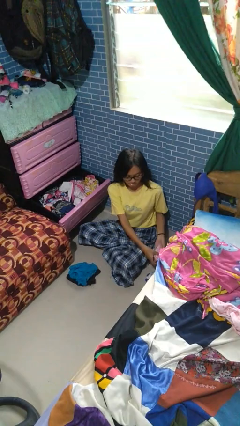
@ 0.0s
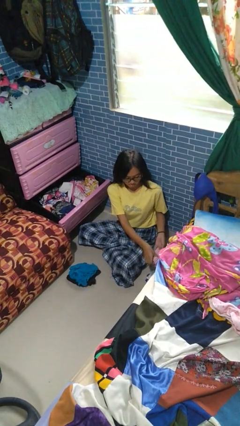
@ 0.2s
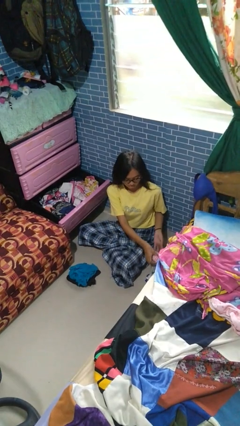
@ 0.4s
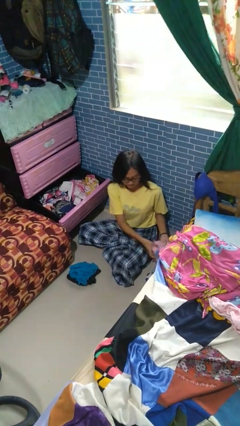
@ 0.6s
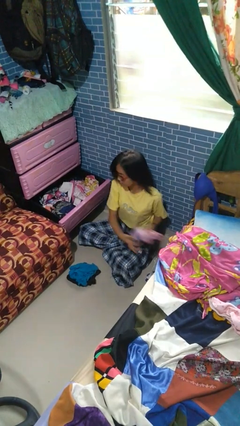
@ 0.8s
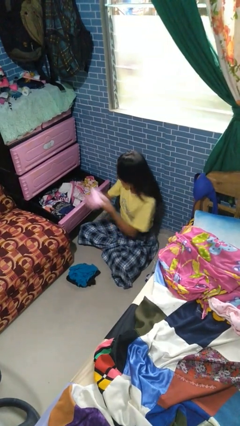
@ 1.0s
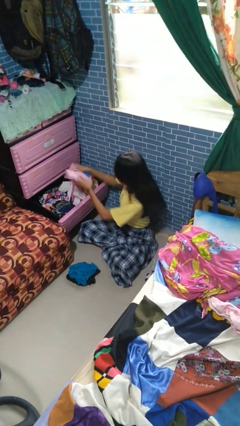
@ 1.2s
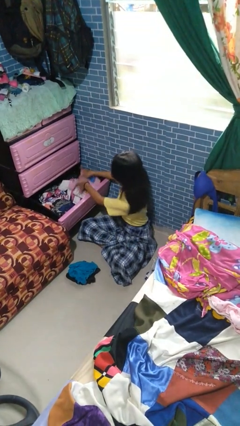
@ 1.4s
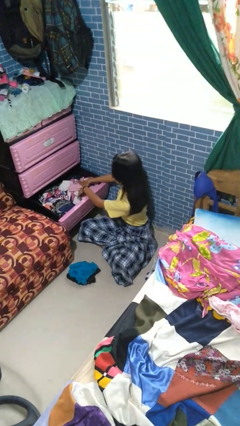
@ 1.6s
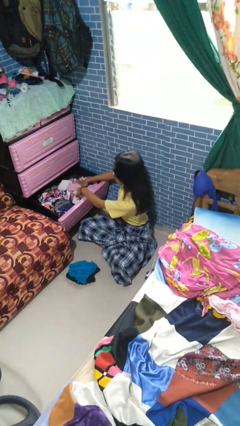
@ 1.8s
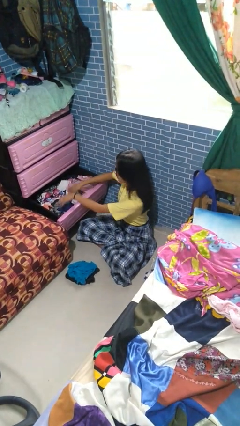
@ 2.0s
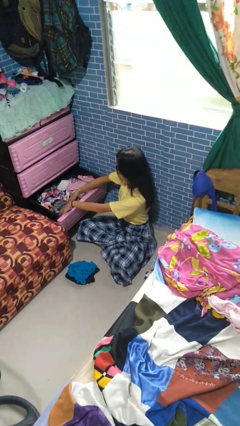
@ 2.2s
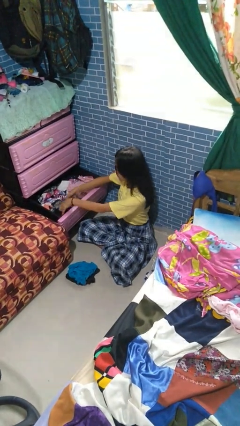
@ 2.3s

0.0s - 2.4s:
person puts clothes into dresser

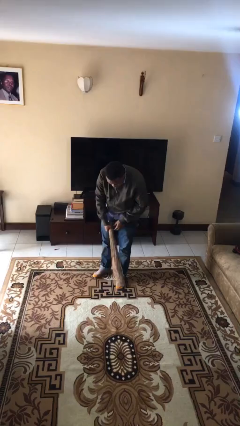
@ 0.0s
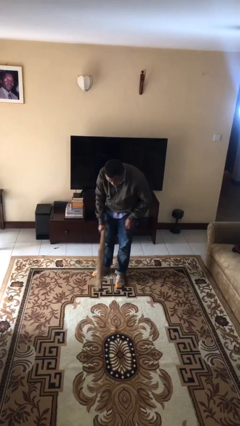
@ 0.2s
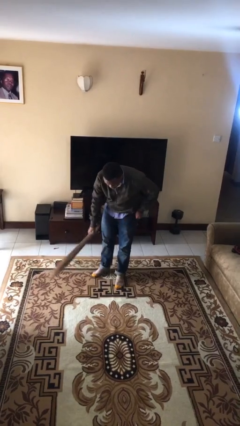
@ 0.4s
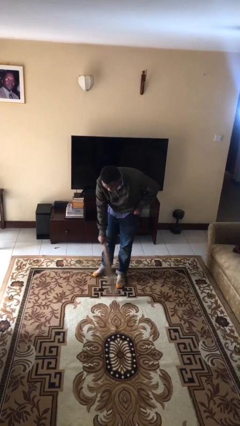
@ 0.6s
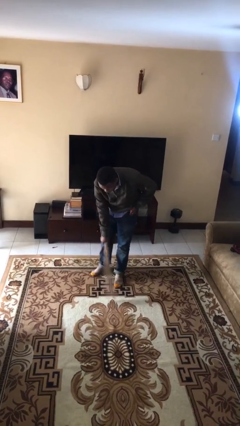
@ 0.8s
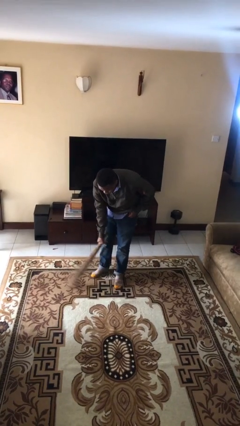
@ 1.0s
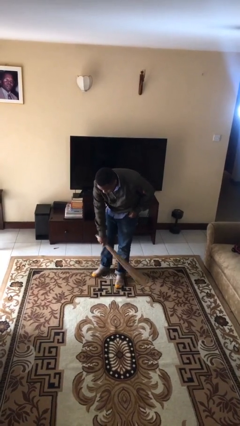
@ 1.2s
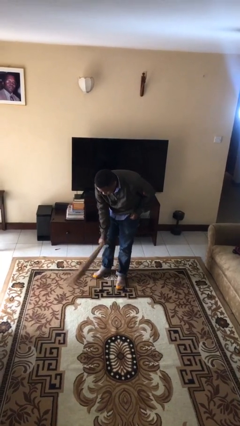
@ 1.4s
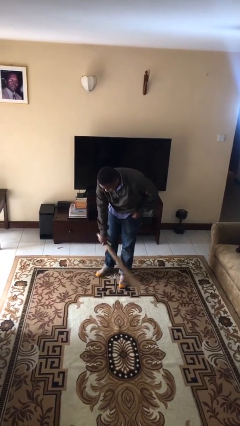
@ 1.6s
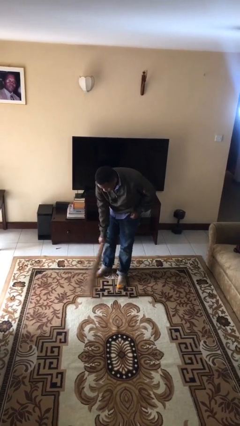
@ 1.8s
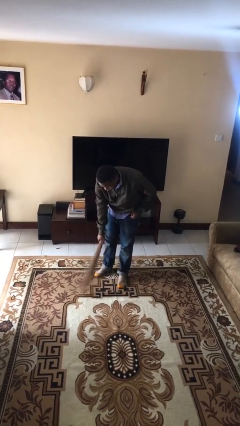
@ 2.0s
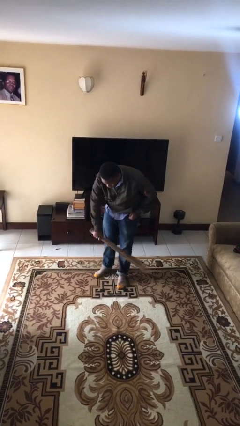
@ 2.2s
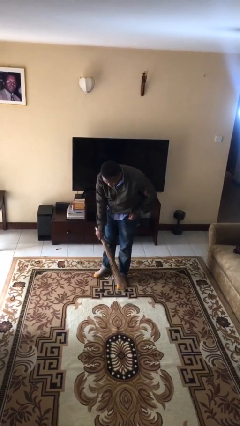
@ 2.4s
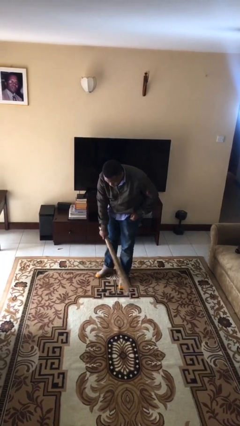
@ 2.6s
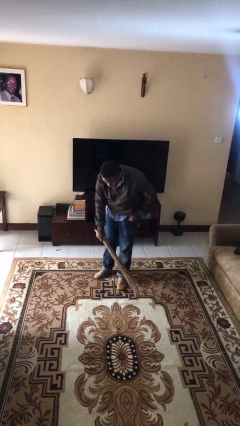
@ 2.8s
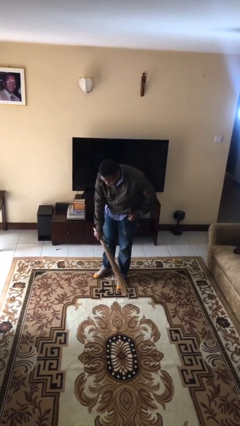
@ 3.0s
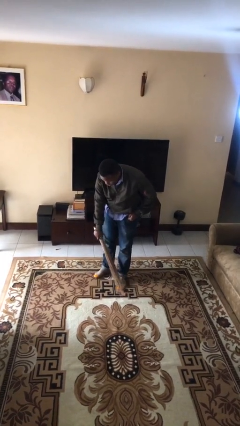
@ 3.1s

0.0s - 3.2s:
person sweeps floor

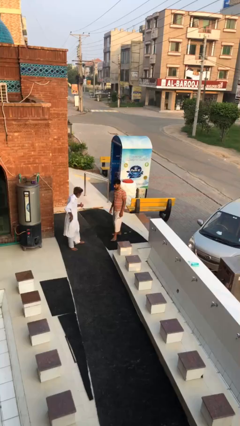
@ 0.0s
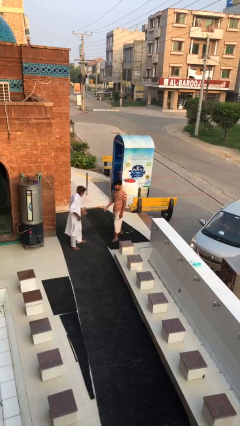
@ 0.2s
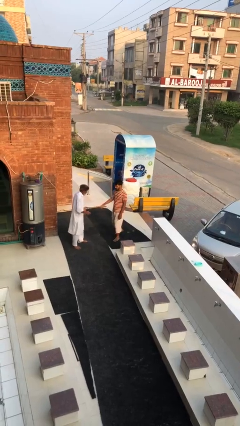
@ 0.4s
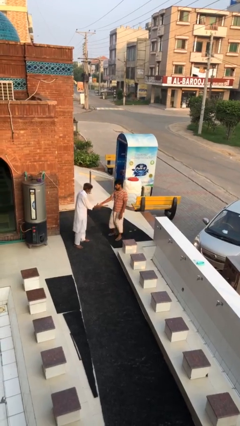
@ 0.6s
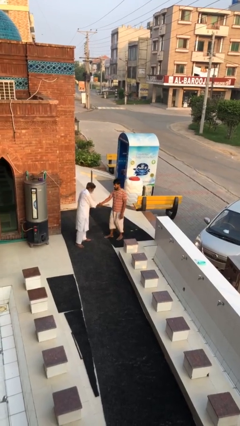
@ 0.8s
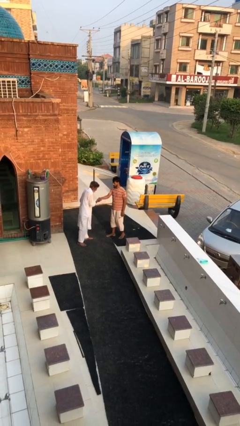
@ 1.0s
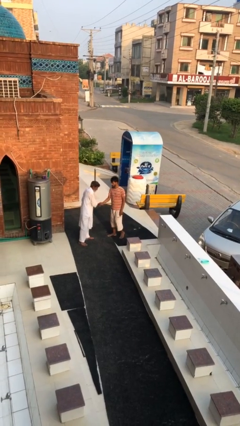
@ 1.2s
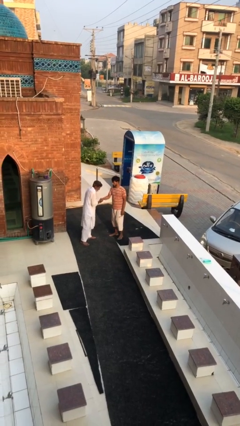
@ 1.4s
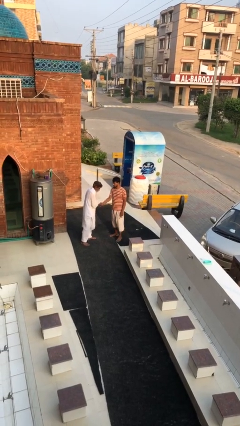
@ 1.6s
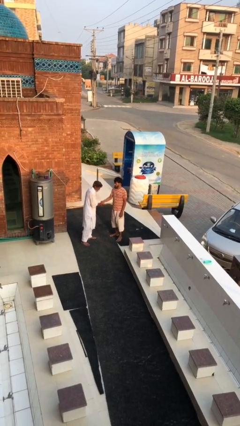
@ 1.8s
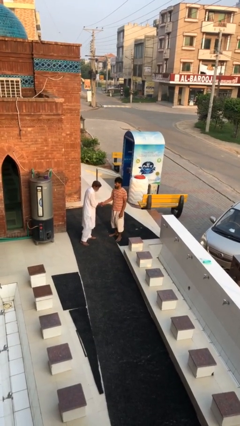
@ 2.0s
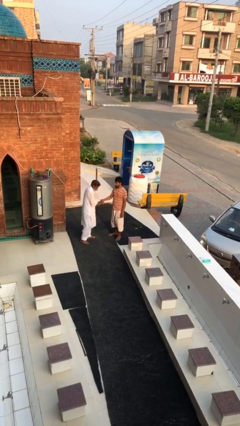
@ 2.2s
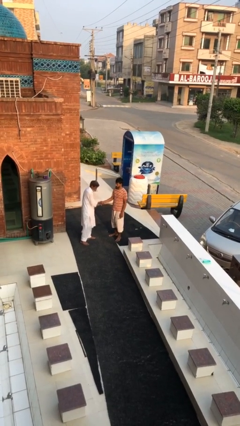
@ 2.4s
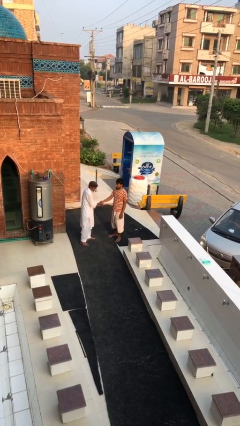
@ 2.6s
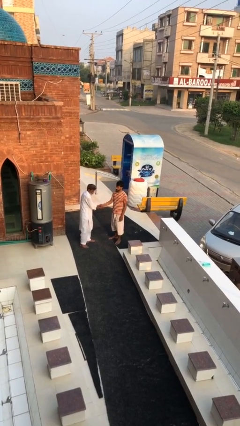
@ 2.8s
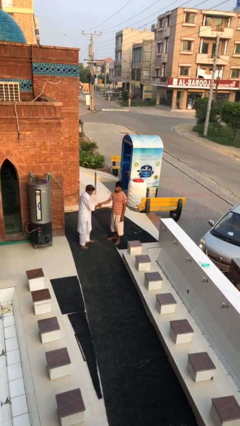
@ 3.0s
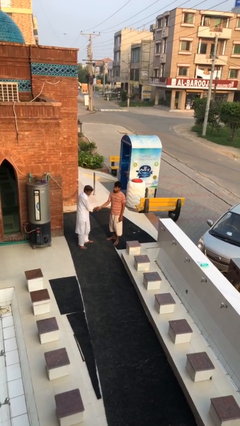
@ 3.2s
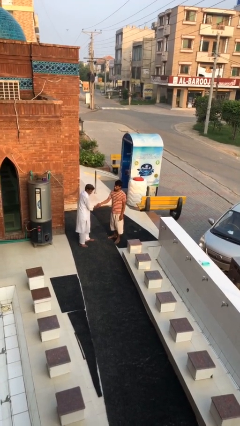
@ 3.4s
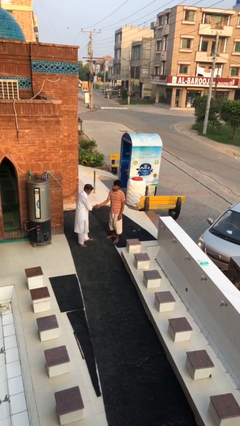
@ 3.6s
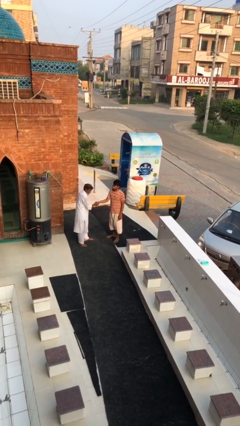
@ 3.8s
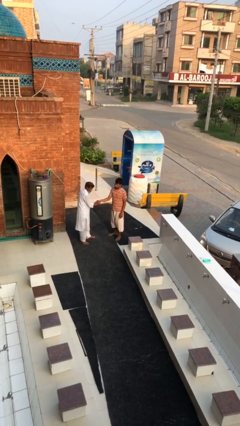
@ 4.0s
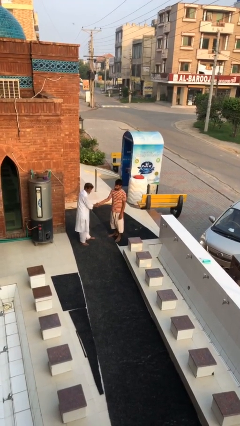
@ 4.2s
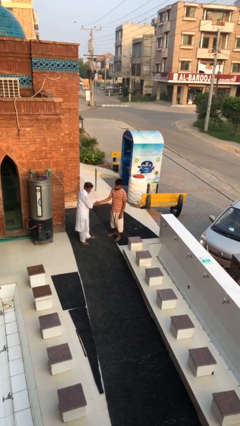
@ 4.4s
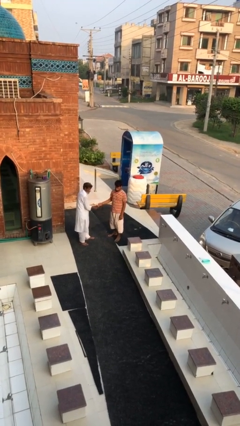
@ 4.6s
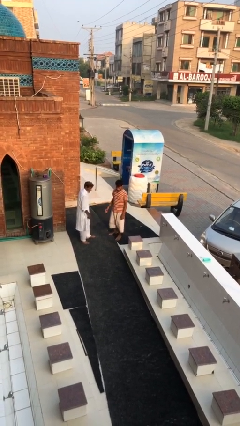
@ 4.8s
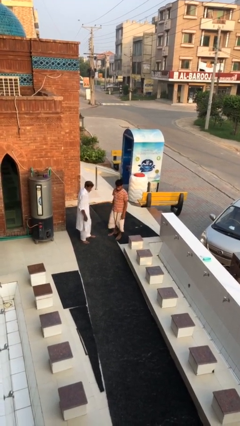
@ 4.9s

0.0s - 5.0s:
person shakes hand

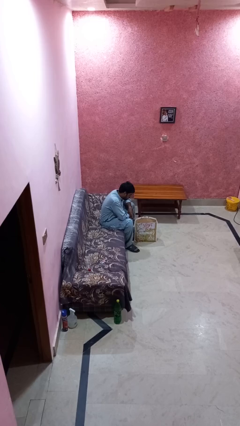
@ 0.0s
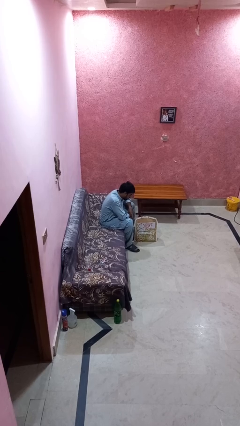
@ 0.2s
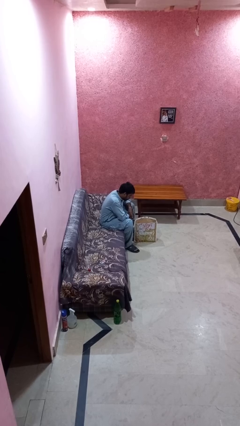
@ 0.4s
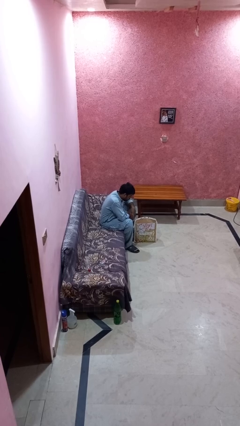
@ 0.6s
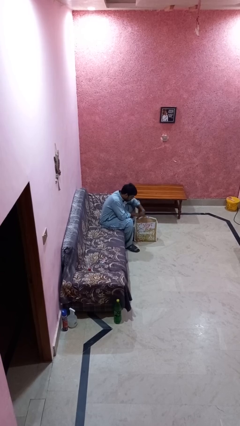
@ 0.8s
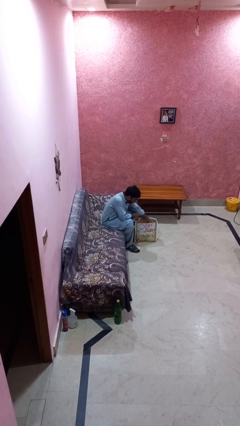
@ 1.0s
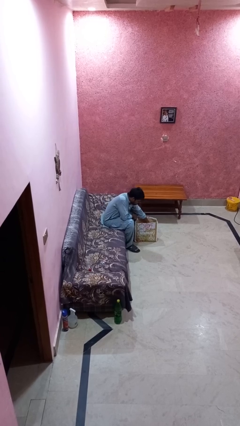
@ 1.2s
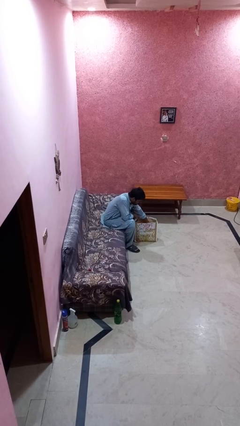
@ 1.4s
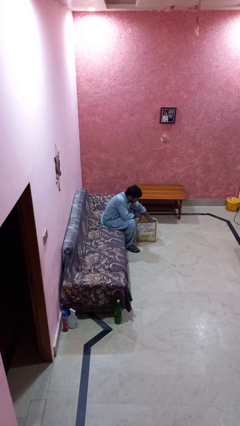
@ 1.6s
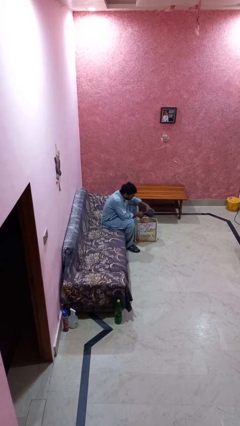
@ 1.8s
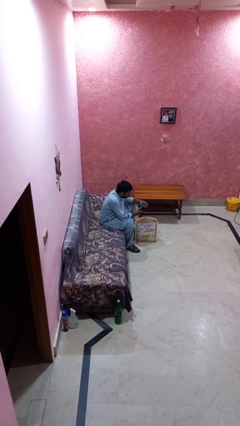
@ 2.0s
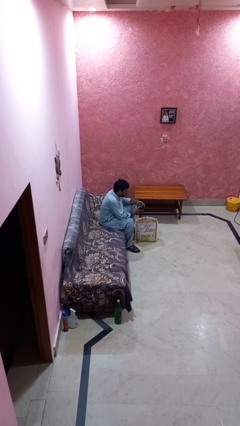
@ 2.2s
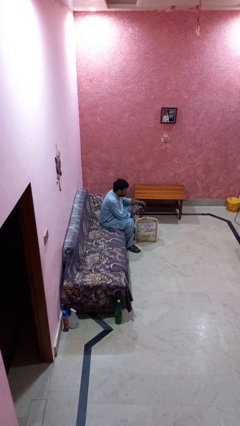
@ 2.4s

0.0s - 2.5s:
person takes object from bag

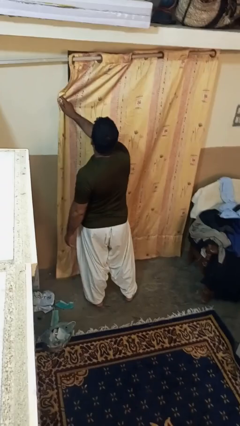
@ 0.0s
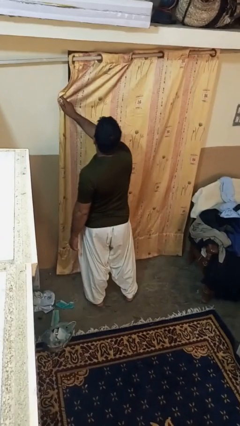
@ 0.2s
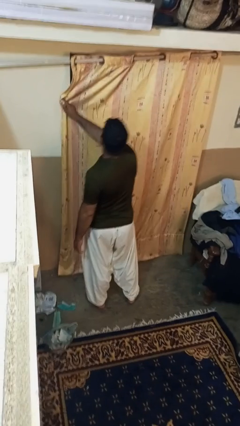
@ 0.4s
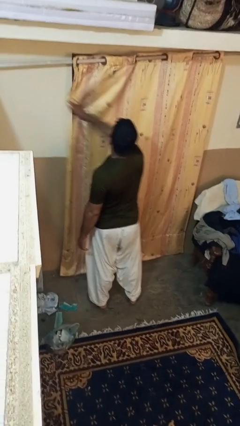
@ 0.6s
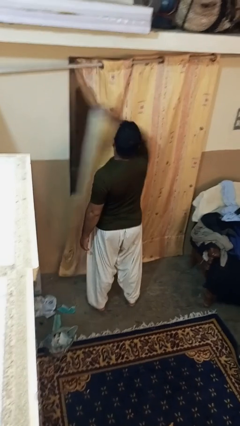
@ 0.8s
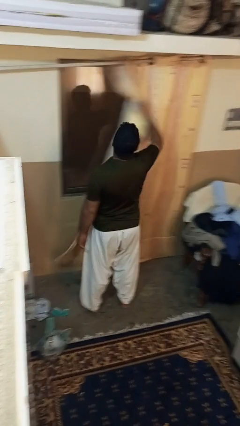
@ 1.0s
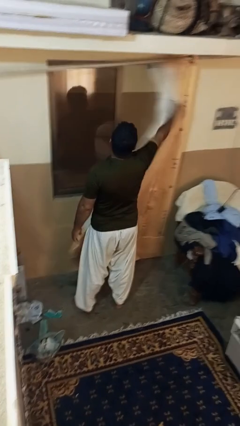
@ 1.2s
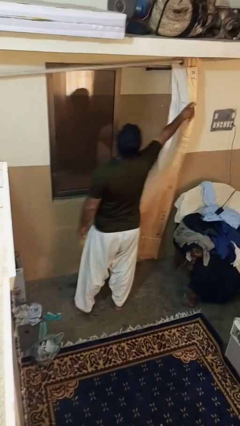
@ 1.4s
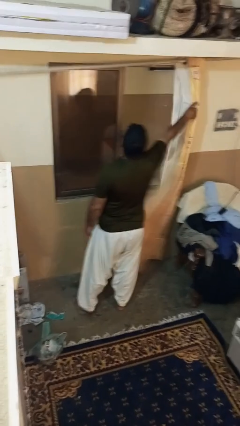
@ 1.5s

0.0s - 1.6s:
person opens curtains

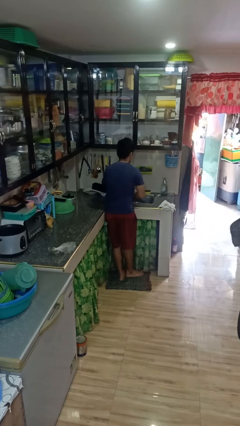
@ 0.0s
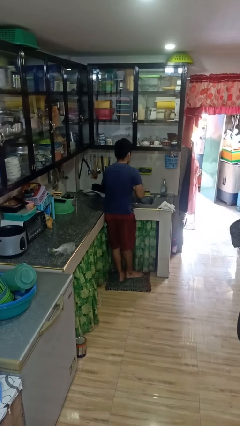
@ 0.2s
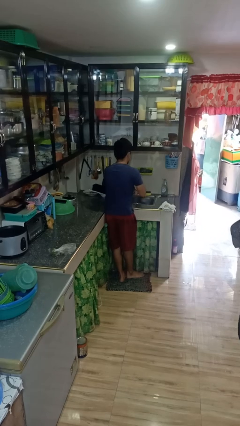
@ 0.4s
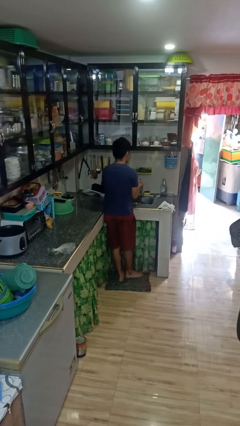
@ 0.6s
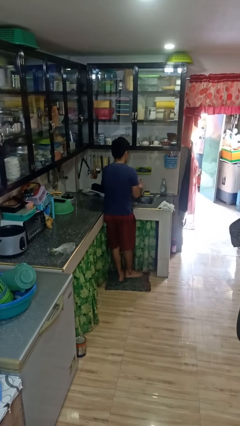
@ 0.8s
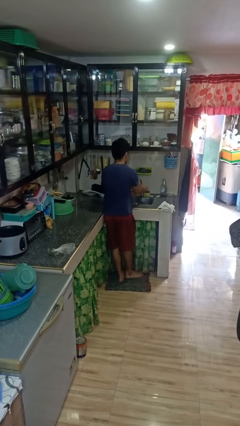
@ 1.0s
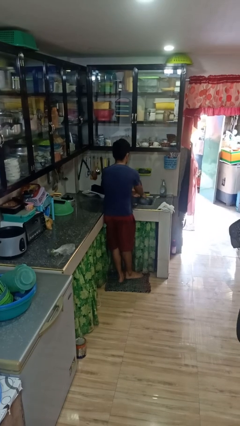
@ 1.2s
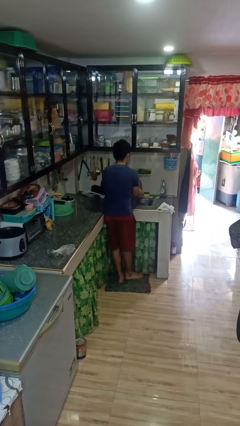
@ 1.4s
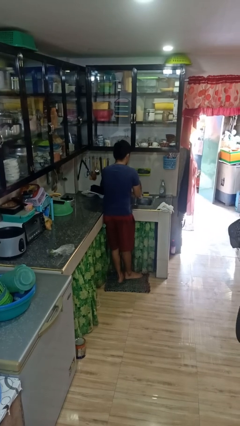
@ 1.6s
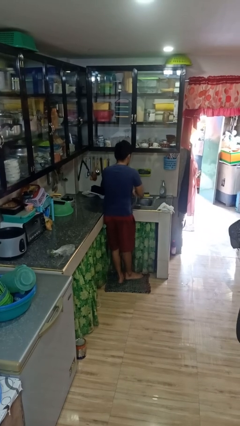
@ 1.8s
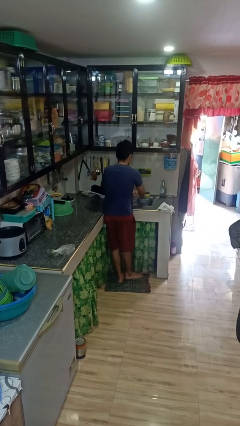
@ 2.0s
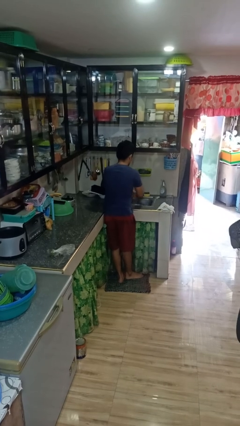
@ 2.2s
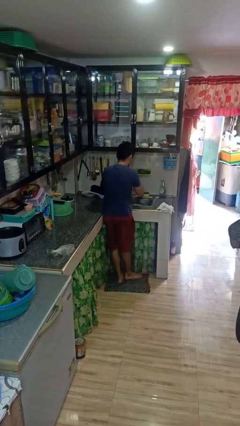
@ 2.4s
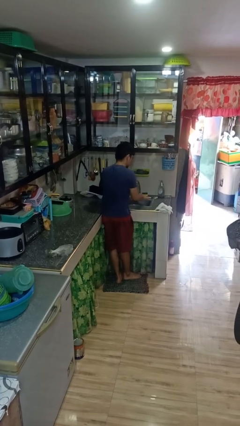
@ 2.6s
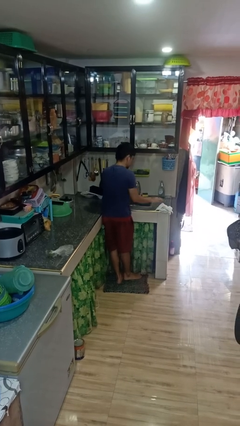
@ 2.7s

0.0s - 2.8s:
person washes hands

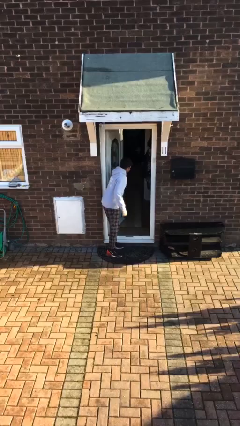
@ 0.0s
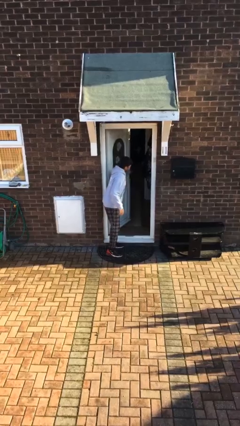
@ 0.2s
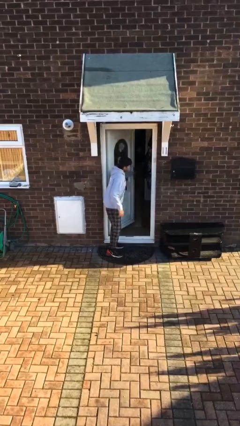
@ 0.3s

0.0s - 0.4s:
person closes facility door
